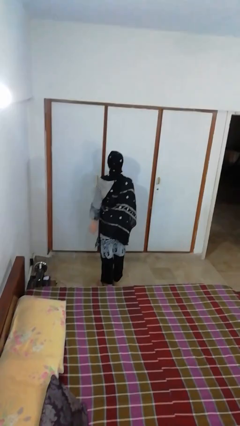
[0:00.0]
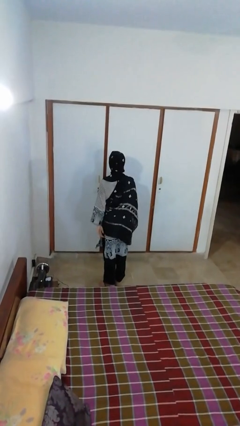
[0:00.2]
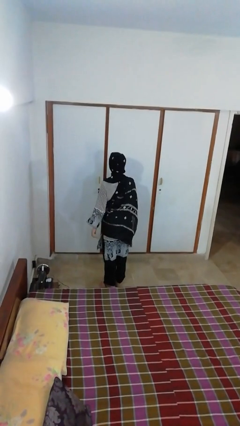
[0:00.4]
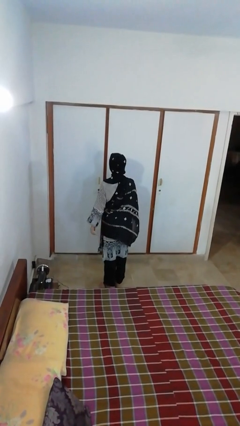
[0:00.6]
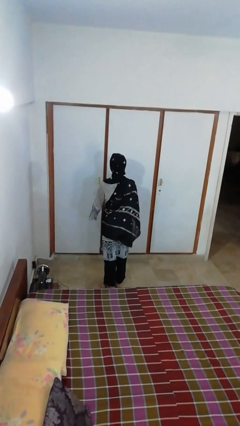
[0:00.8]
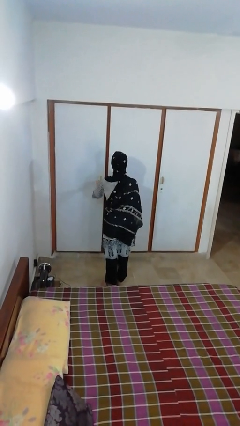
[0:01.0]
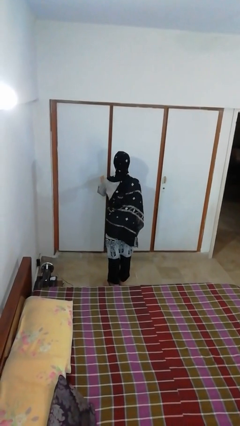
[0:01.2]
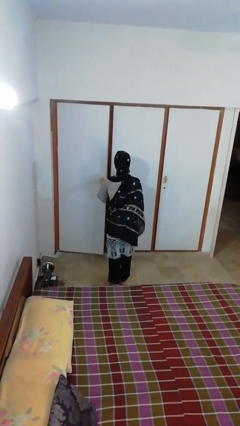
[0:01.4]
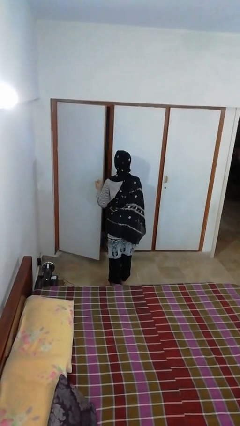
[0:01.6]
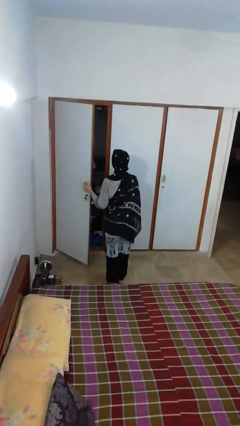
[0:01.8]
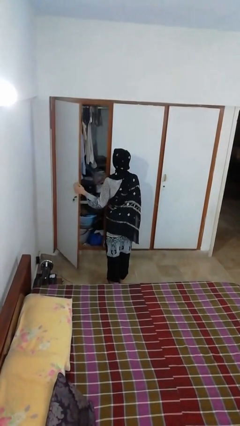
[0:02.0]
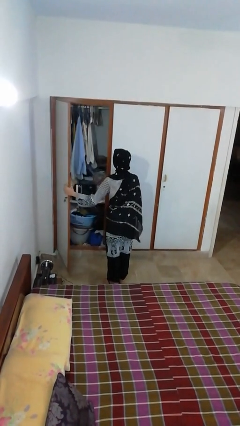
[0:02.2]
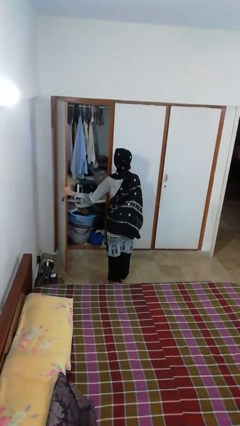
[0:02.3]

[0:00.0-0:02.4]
person opens closet door

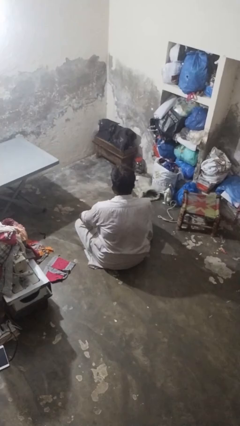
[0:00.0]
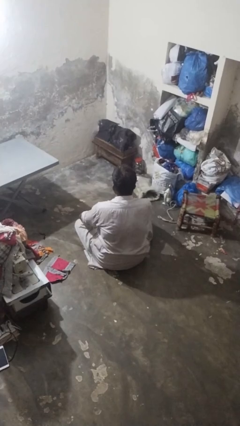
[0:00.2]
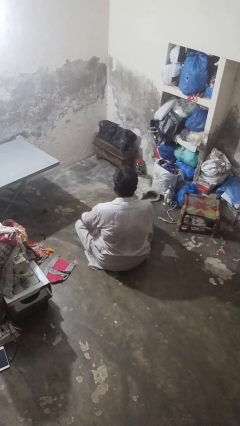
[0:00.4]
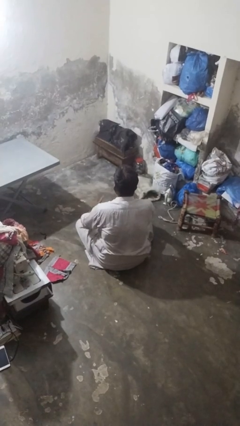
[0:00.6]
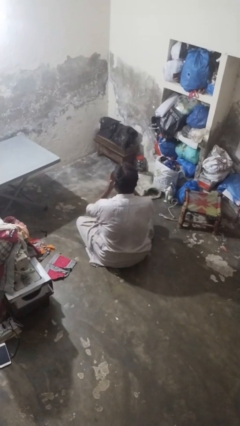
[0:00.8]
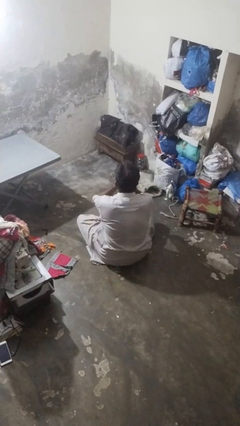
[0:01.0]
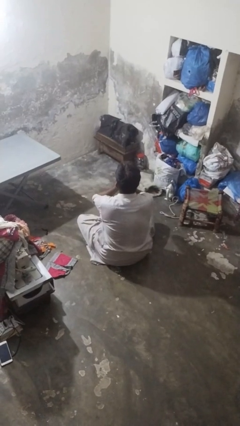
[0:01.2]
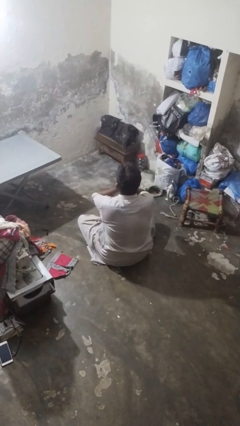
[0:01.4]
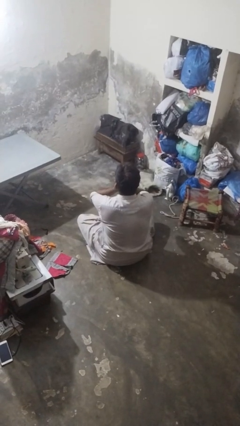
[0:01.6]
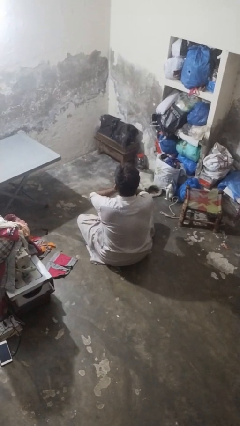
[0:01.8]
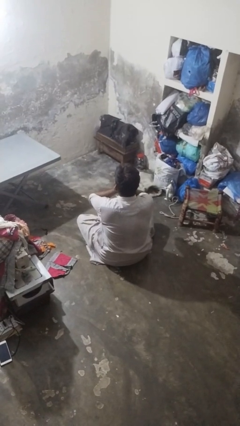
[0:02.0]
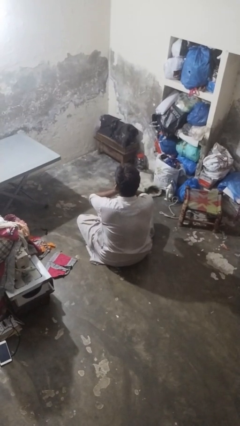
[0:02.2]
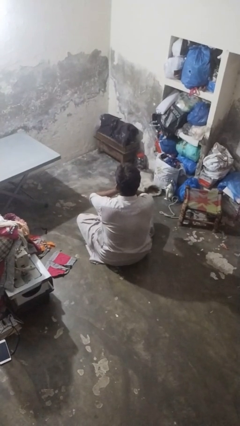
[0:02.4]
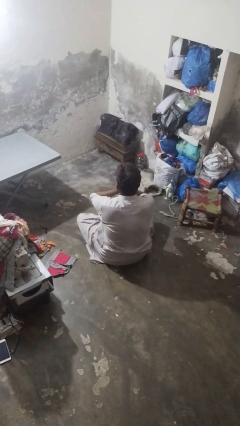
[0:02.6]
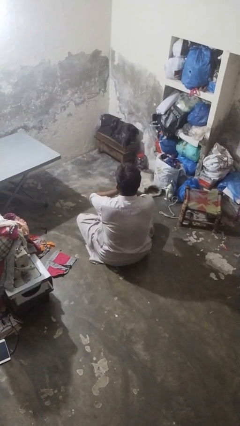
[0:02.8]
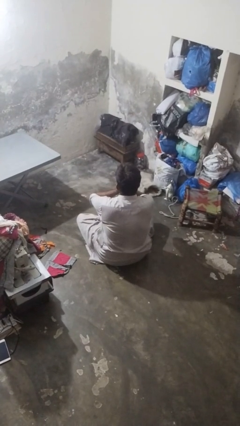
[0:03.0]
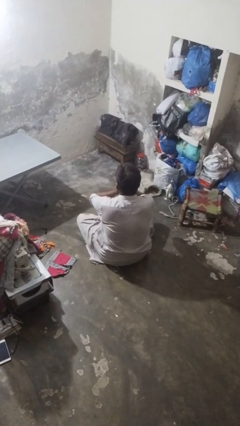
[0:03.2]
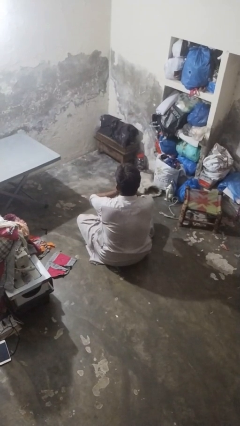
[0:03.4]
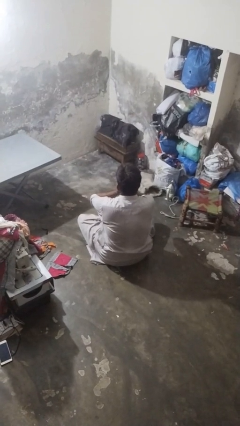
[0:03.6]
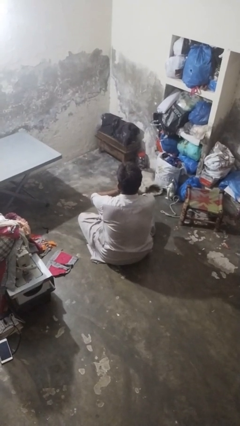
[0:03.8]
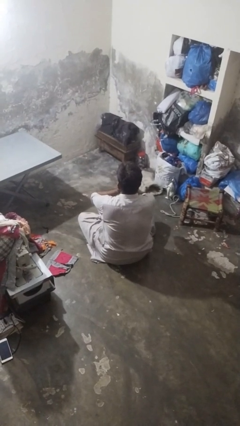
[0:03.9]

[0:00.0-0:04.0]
person covers face with hands

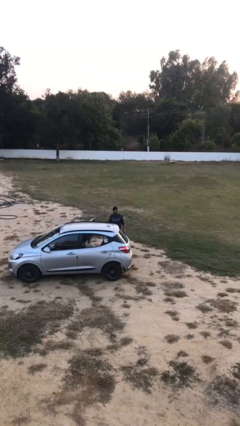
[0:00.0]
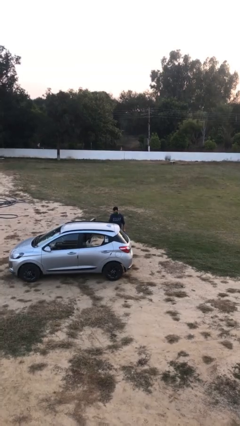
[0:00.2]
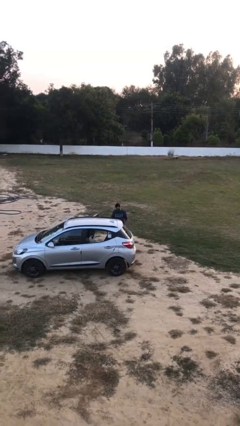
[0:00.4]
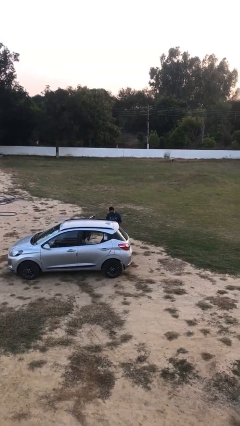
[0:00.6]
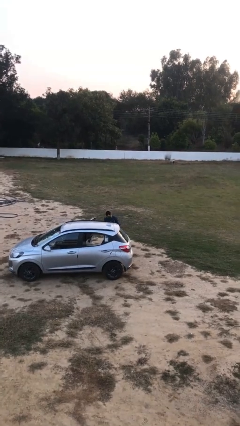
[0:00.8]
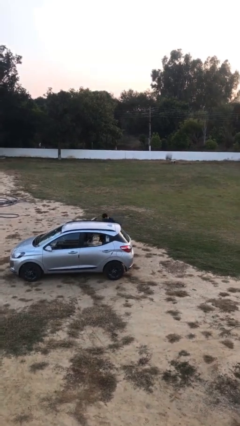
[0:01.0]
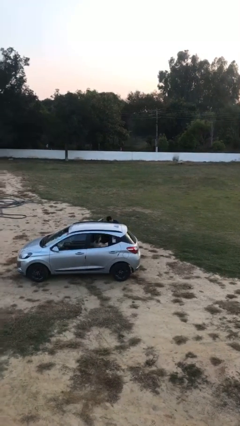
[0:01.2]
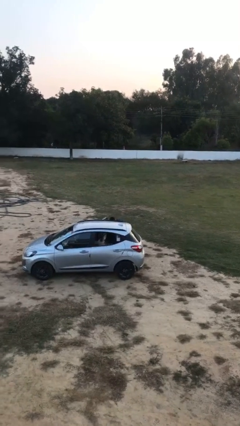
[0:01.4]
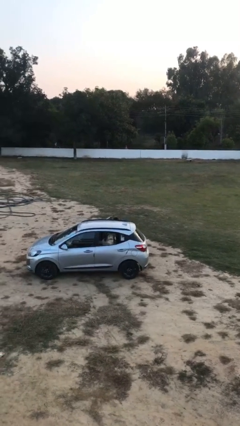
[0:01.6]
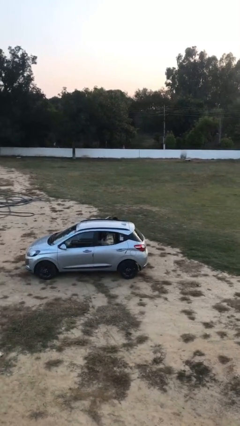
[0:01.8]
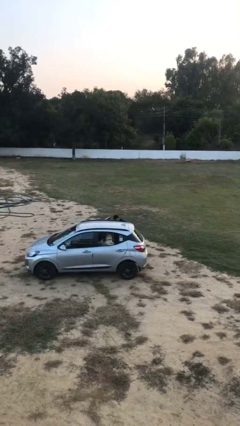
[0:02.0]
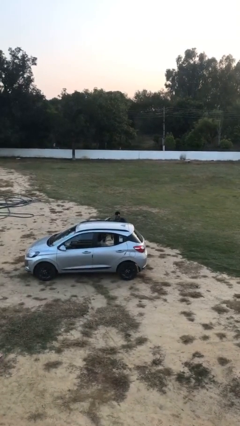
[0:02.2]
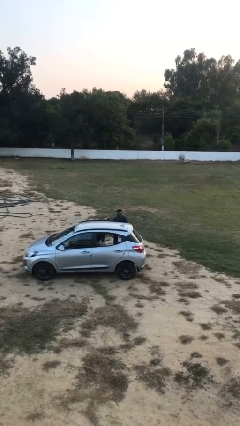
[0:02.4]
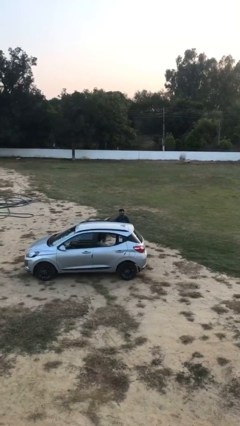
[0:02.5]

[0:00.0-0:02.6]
person loads car

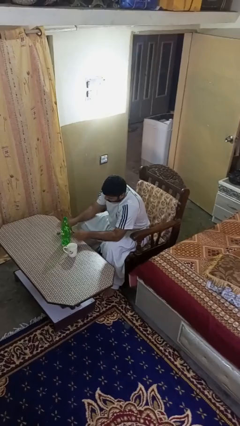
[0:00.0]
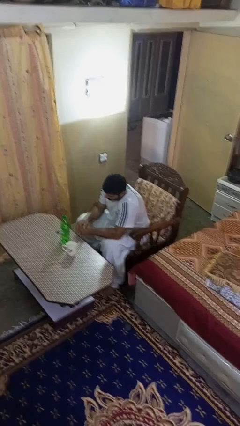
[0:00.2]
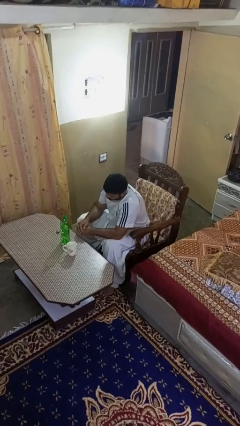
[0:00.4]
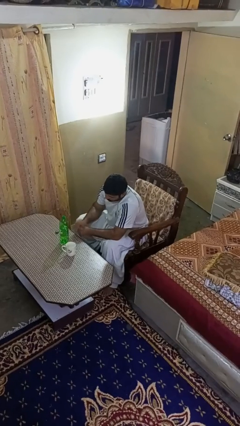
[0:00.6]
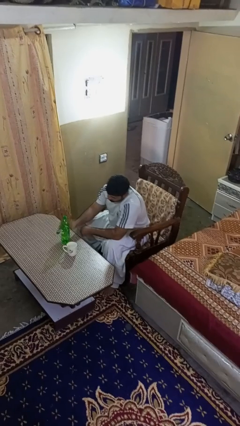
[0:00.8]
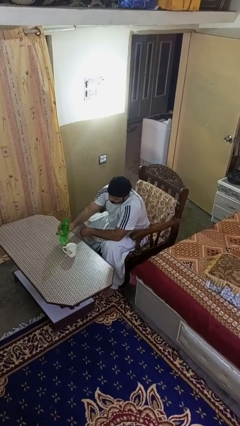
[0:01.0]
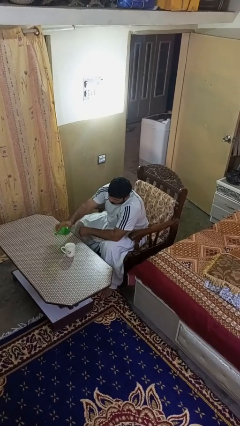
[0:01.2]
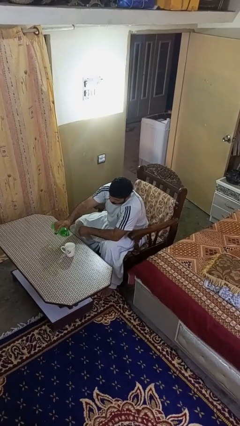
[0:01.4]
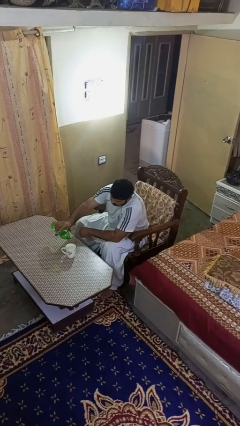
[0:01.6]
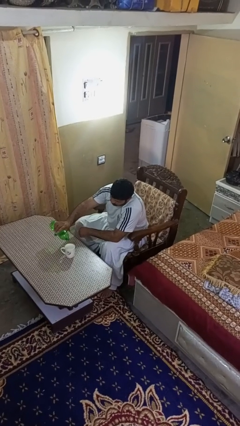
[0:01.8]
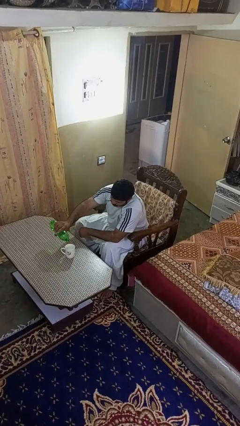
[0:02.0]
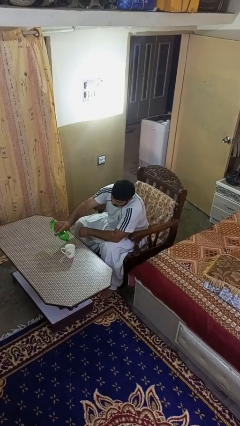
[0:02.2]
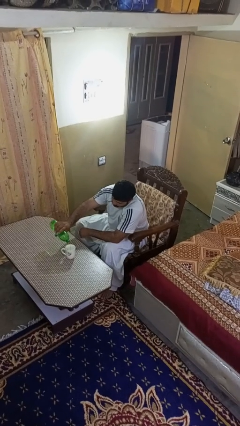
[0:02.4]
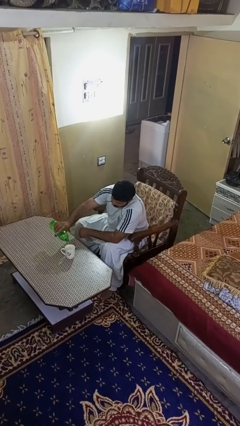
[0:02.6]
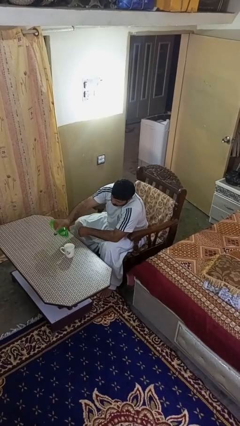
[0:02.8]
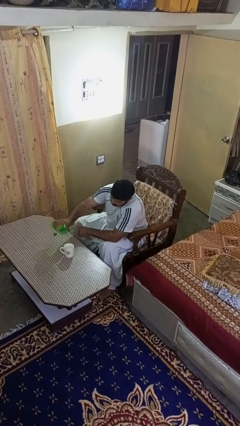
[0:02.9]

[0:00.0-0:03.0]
person pours liquid into cup

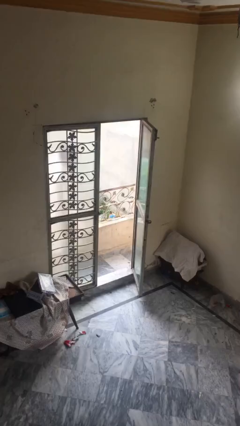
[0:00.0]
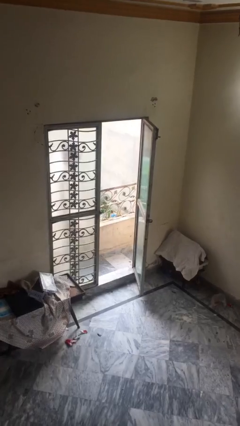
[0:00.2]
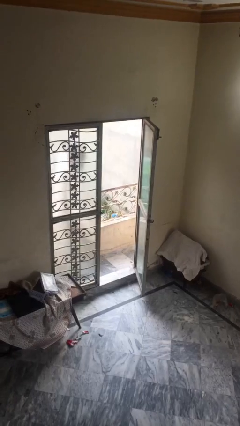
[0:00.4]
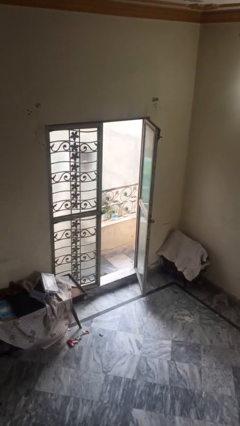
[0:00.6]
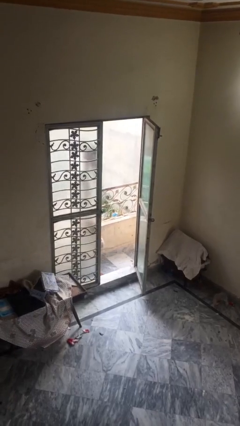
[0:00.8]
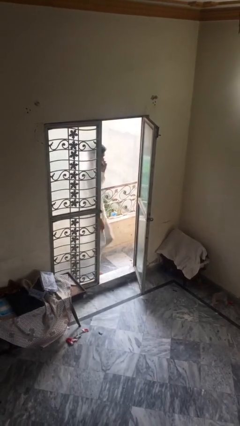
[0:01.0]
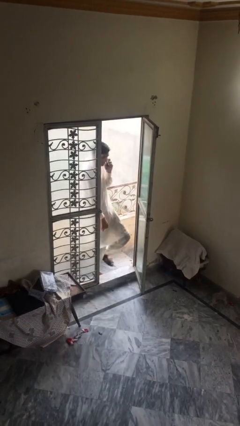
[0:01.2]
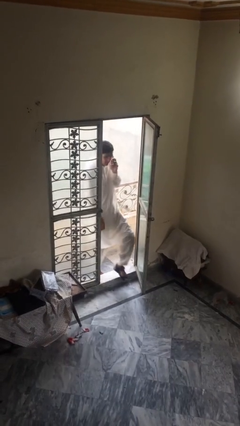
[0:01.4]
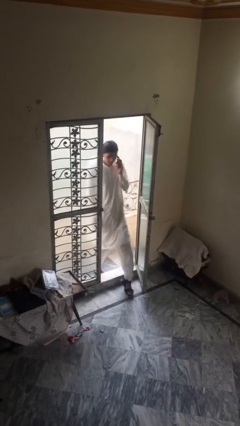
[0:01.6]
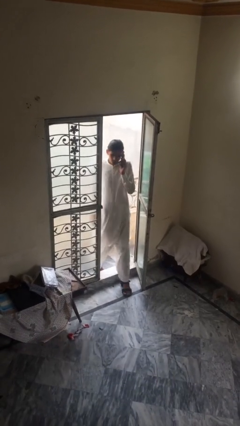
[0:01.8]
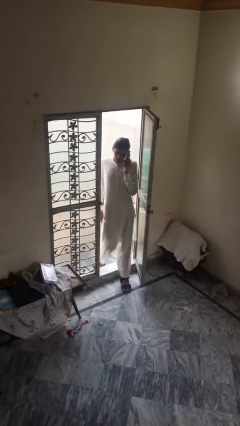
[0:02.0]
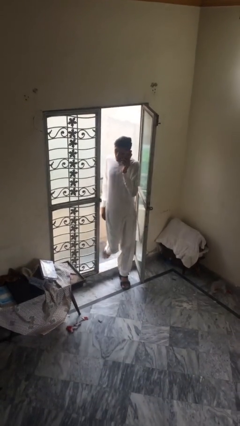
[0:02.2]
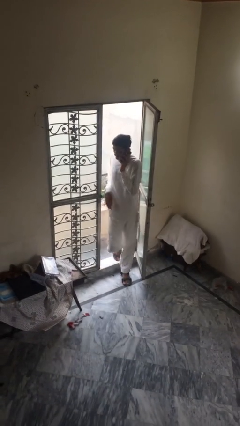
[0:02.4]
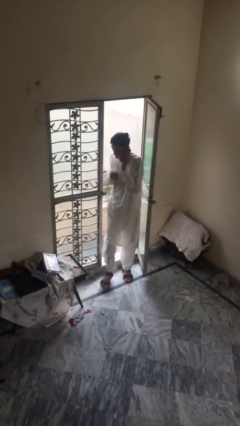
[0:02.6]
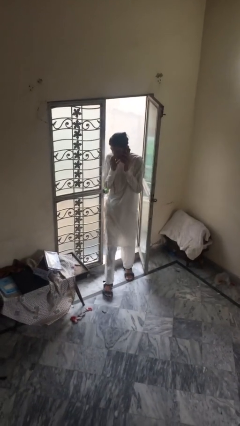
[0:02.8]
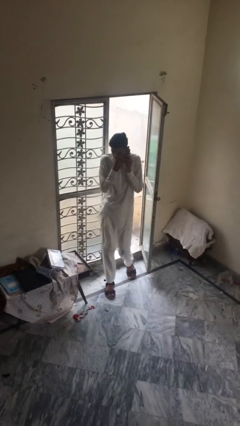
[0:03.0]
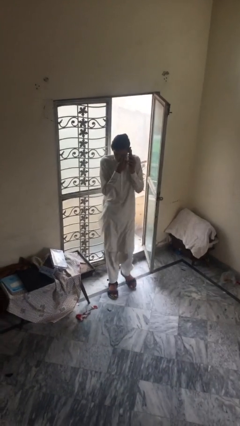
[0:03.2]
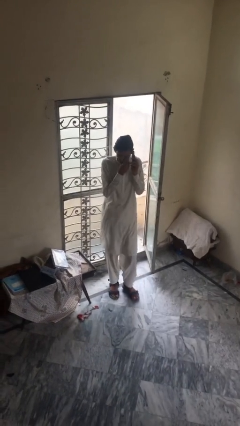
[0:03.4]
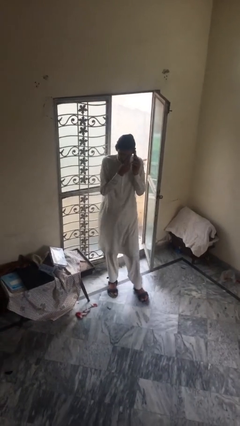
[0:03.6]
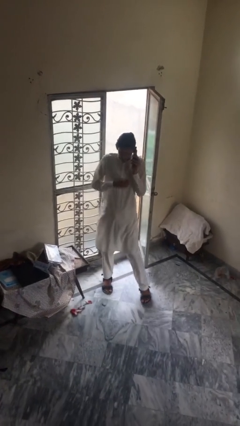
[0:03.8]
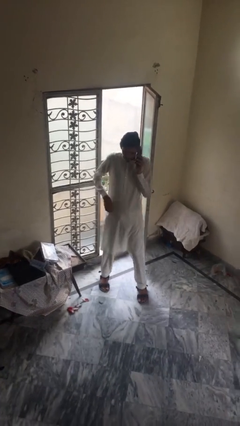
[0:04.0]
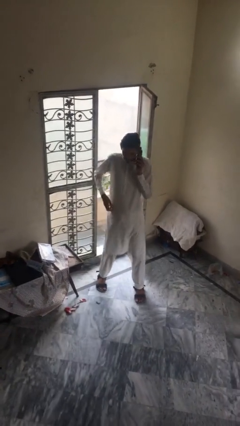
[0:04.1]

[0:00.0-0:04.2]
person enters scene through structure

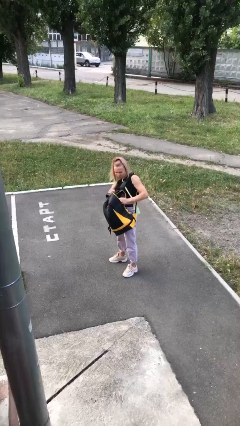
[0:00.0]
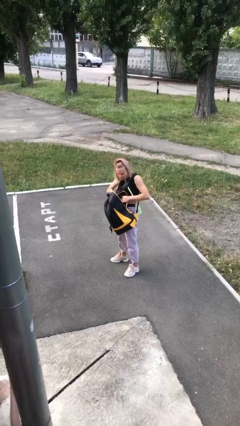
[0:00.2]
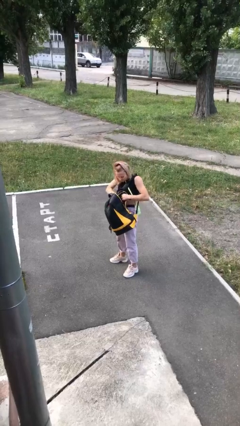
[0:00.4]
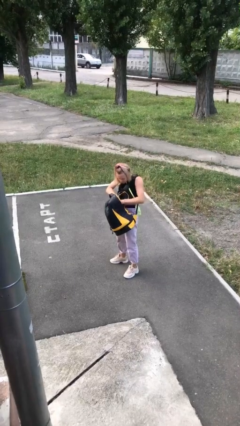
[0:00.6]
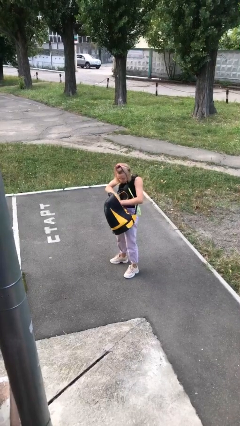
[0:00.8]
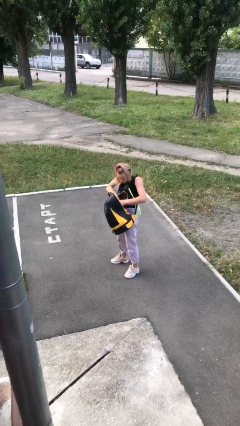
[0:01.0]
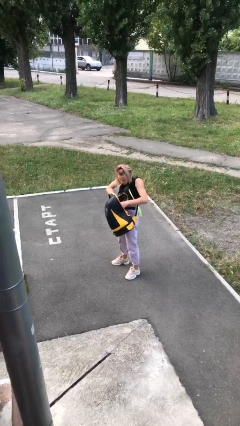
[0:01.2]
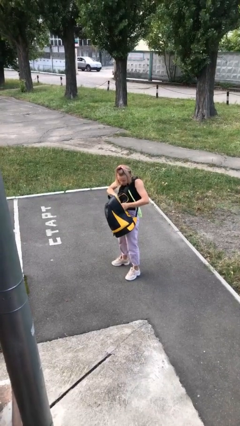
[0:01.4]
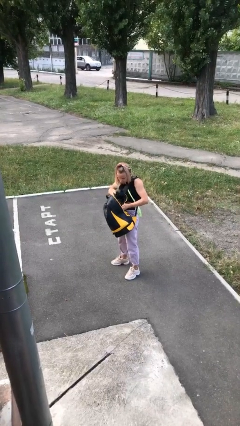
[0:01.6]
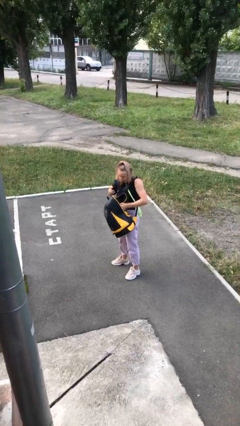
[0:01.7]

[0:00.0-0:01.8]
person searches in backpack
